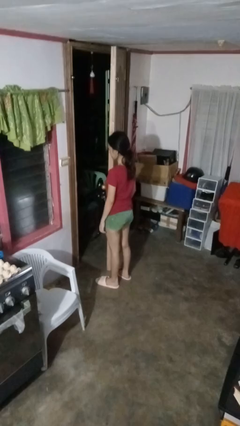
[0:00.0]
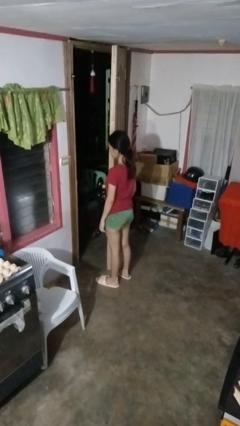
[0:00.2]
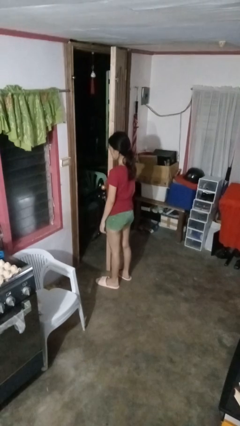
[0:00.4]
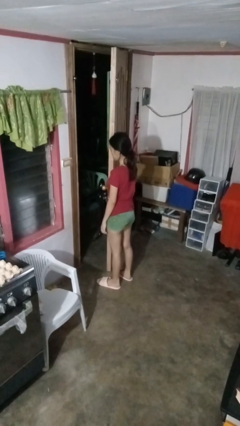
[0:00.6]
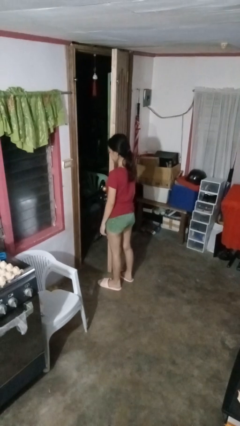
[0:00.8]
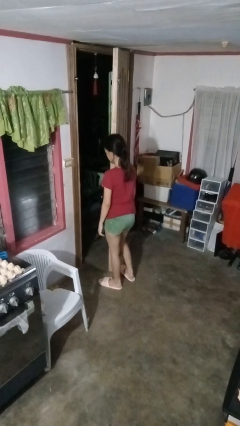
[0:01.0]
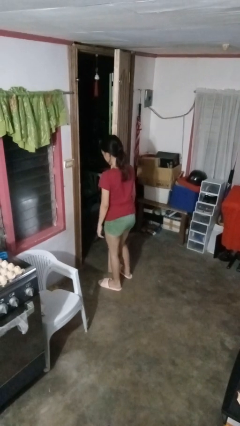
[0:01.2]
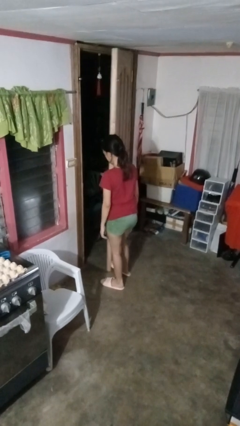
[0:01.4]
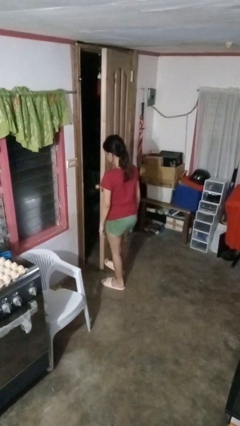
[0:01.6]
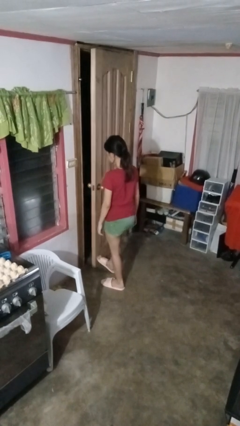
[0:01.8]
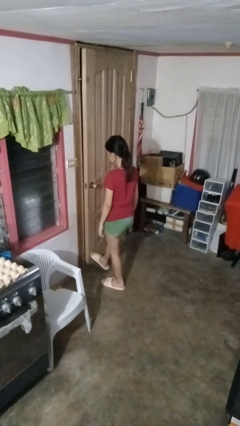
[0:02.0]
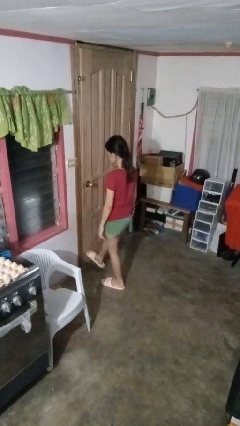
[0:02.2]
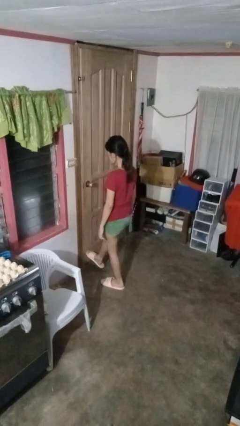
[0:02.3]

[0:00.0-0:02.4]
person closes door with foot

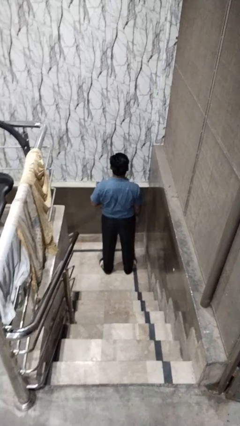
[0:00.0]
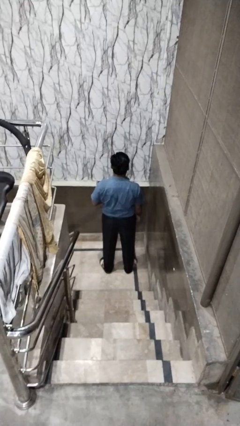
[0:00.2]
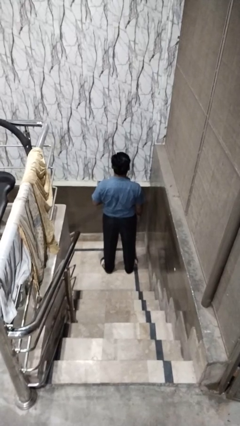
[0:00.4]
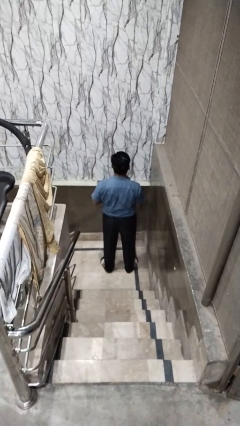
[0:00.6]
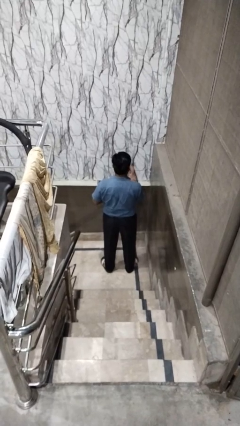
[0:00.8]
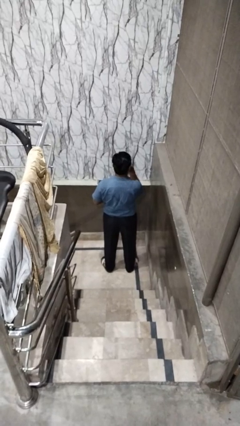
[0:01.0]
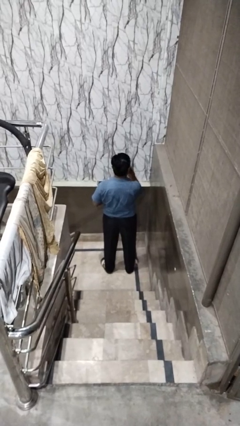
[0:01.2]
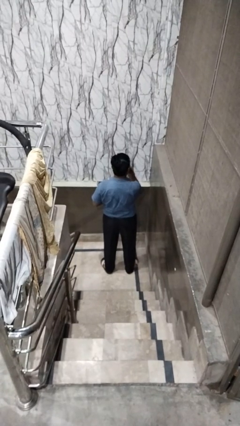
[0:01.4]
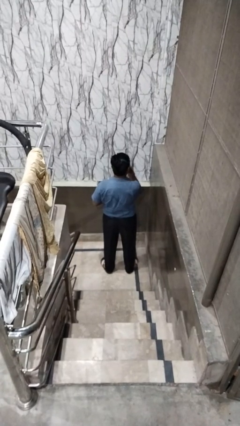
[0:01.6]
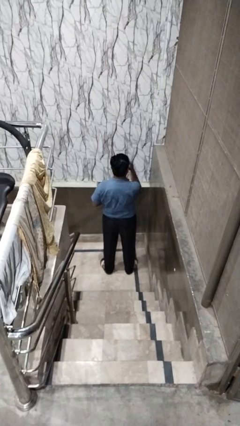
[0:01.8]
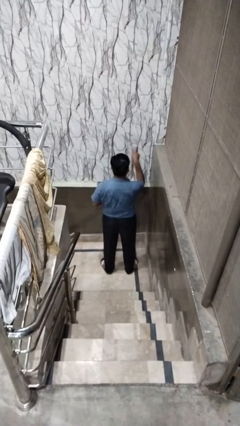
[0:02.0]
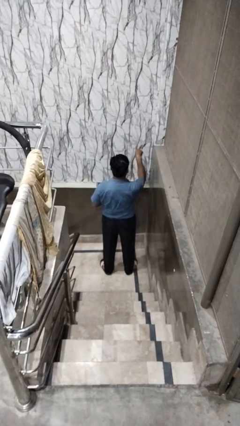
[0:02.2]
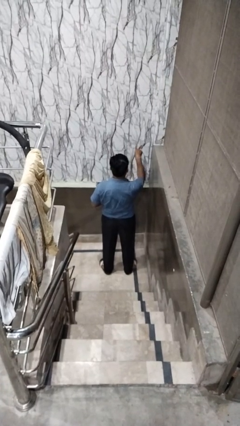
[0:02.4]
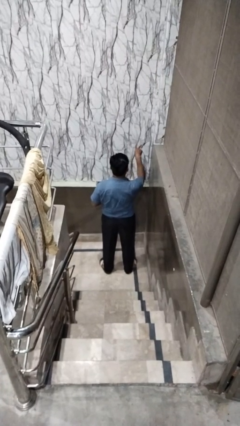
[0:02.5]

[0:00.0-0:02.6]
person gestures watch closely

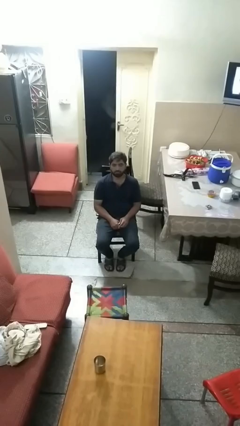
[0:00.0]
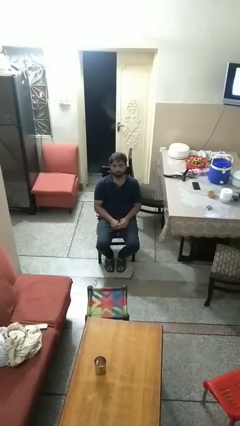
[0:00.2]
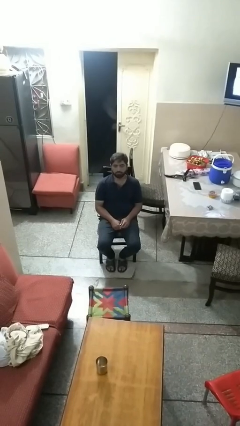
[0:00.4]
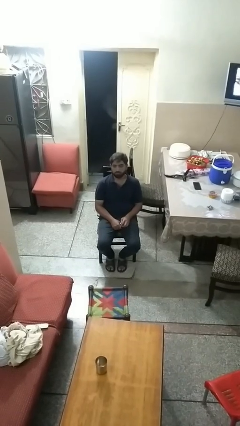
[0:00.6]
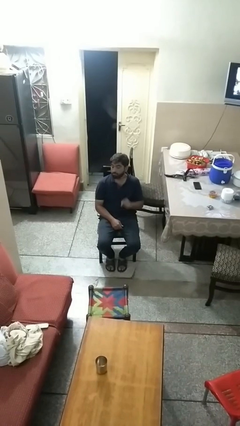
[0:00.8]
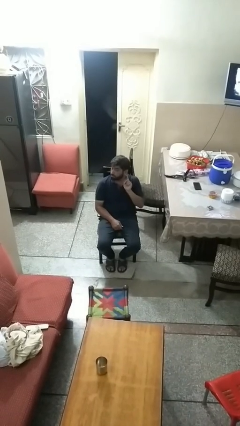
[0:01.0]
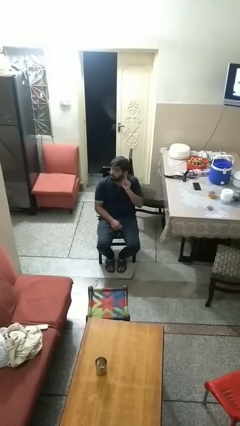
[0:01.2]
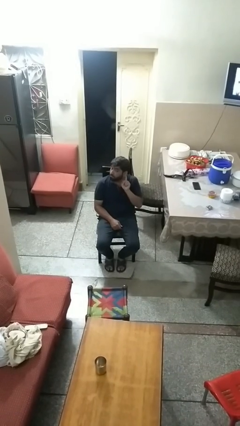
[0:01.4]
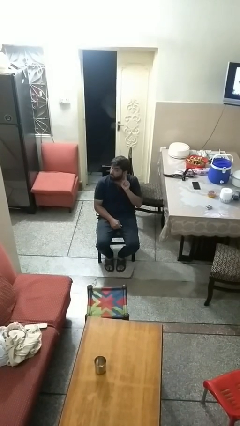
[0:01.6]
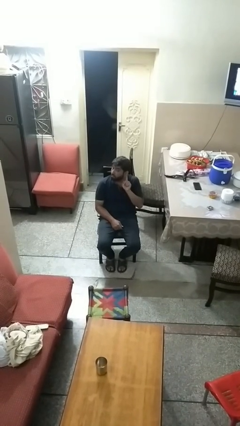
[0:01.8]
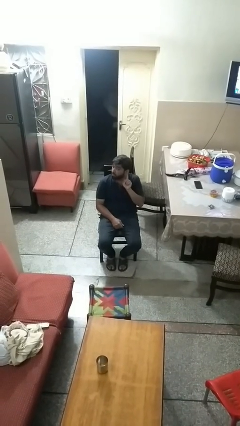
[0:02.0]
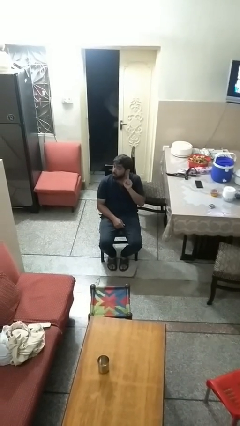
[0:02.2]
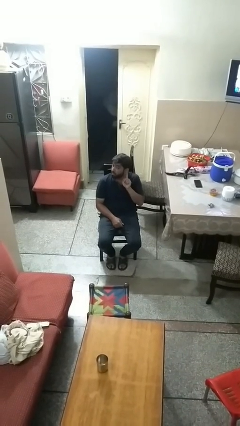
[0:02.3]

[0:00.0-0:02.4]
person gestures listen closely

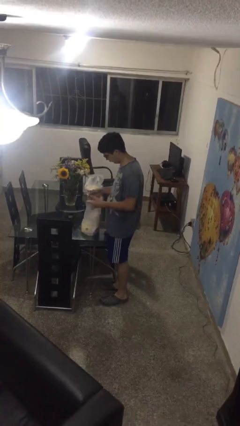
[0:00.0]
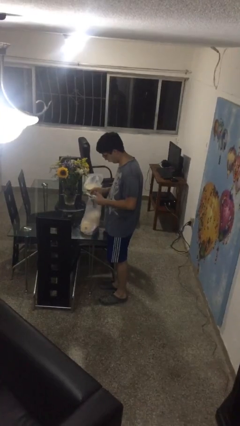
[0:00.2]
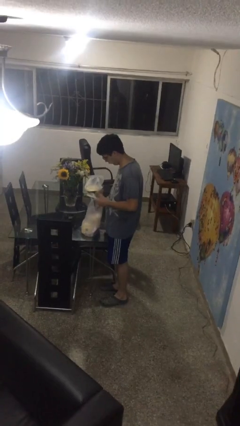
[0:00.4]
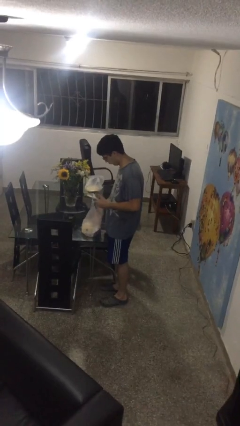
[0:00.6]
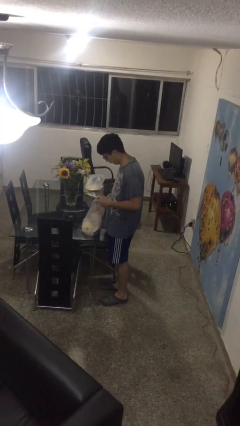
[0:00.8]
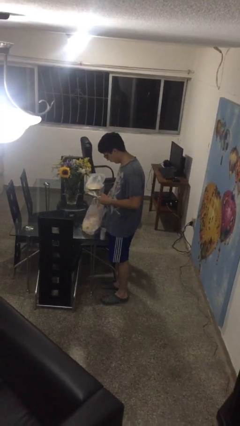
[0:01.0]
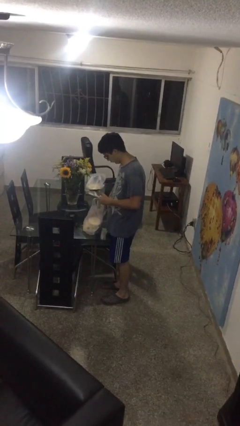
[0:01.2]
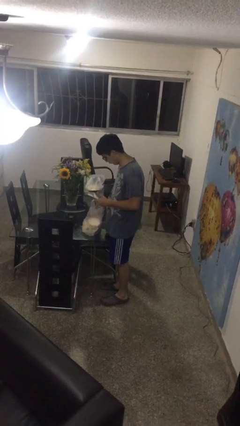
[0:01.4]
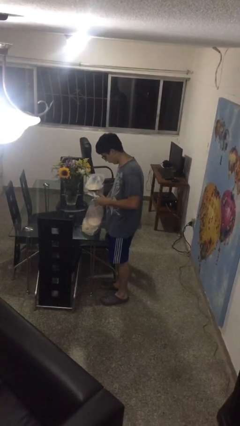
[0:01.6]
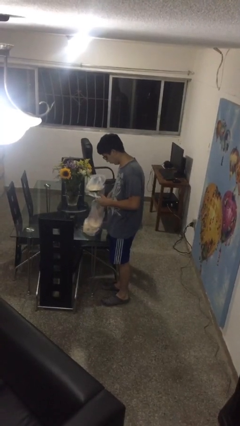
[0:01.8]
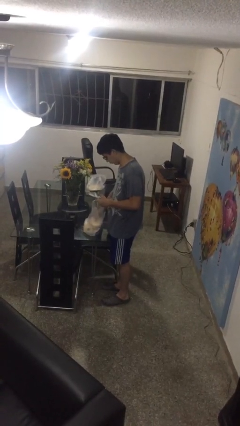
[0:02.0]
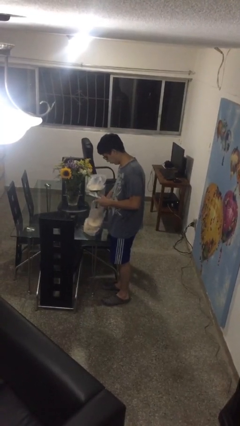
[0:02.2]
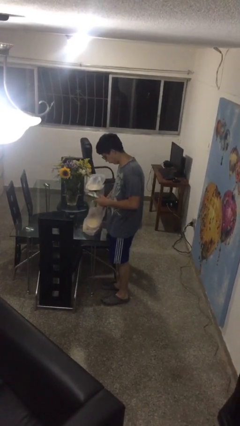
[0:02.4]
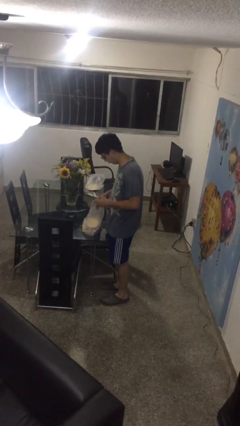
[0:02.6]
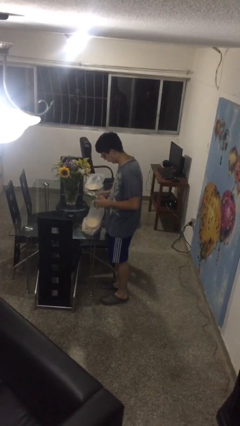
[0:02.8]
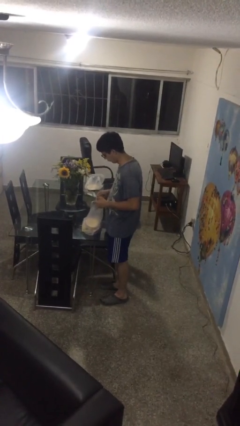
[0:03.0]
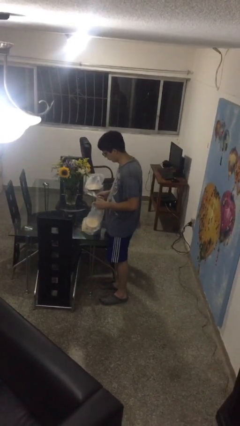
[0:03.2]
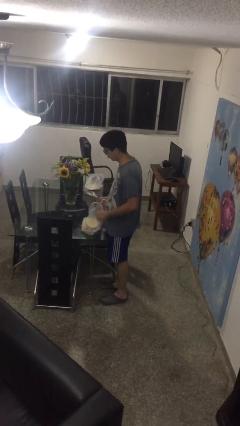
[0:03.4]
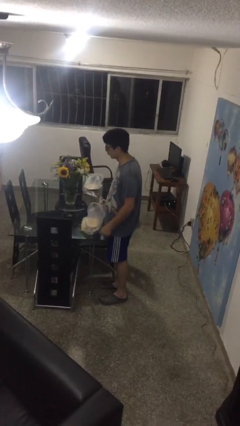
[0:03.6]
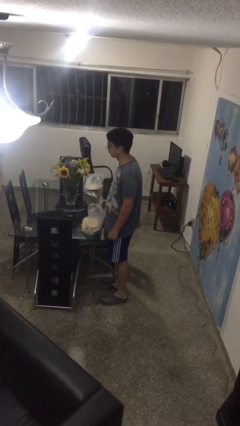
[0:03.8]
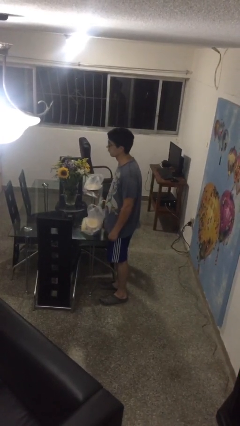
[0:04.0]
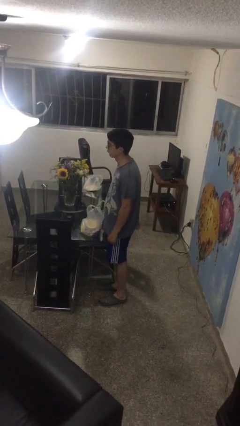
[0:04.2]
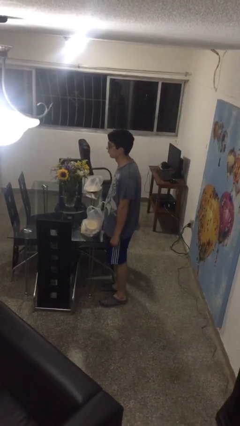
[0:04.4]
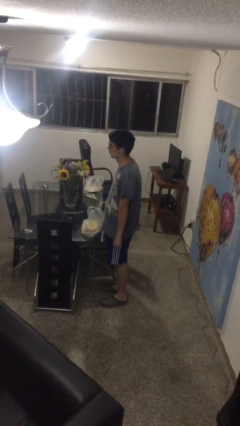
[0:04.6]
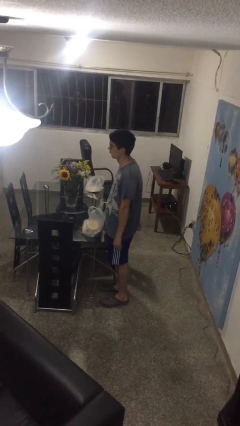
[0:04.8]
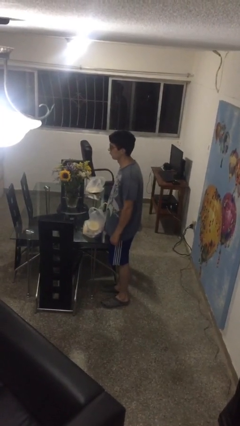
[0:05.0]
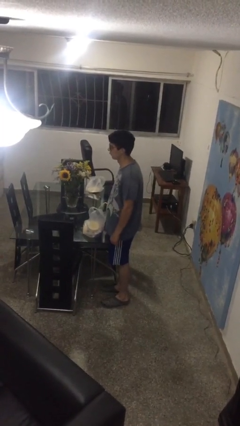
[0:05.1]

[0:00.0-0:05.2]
person searches in bag

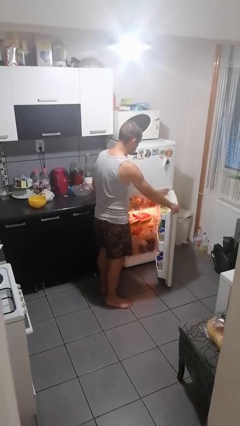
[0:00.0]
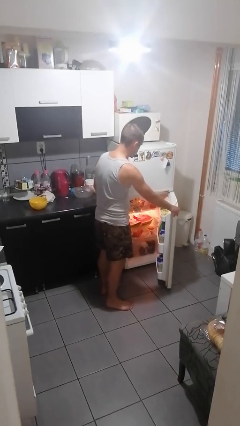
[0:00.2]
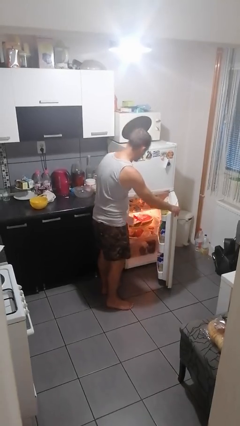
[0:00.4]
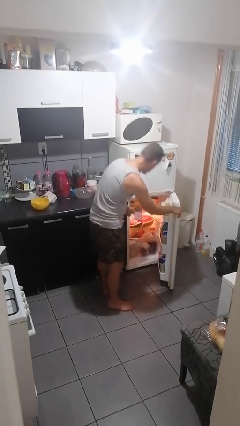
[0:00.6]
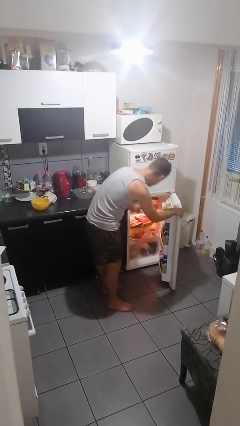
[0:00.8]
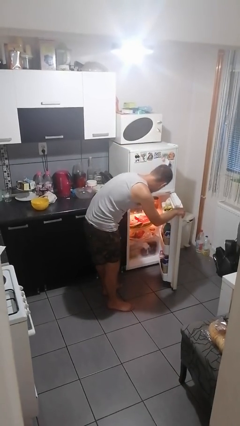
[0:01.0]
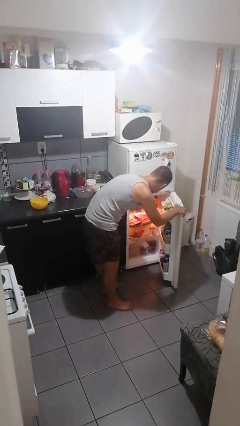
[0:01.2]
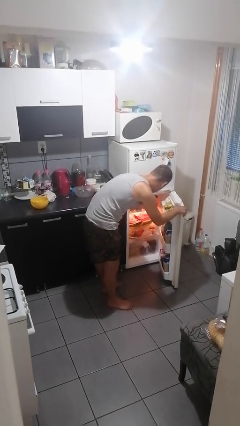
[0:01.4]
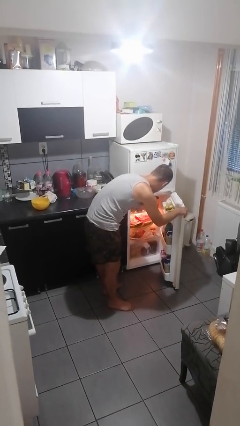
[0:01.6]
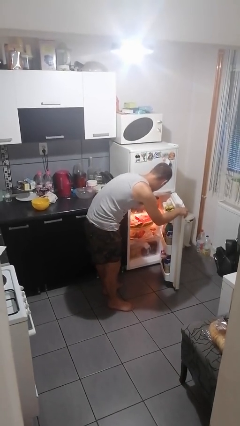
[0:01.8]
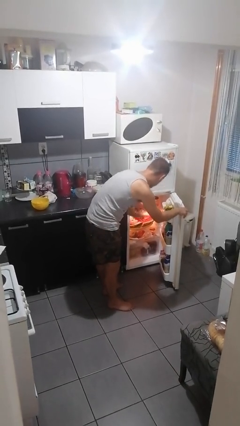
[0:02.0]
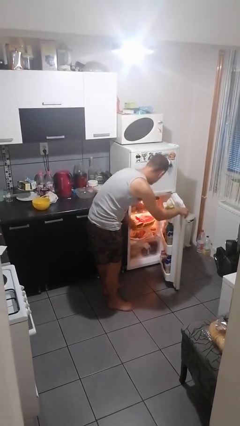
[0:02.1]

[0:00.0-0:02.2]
person puts object into refrigerator

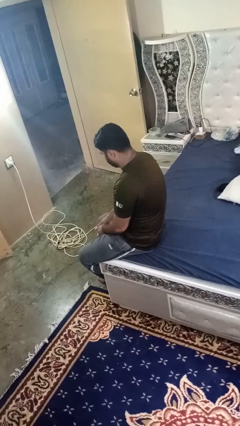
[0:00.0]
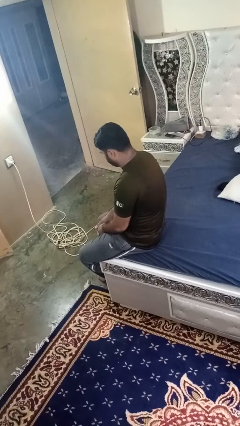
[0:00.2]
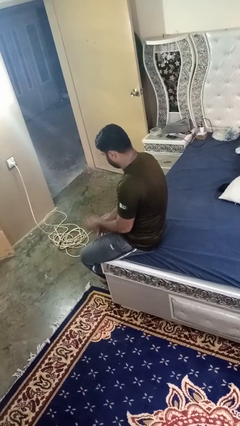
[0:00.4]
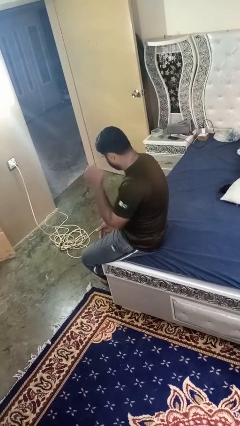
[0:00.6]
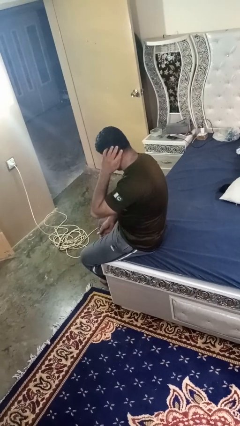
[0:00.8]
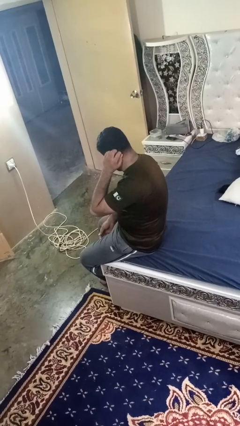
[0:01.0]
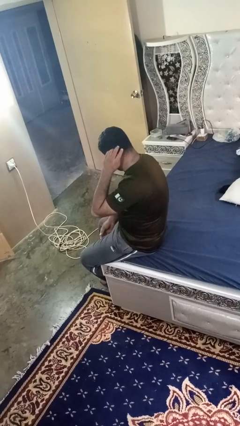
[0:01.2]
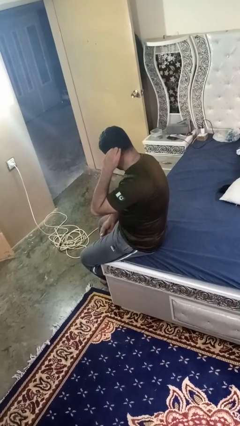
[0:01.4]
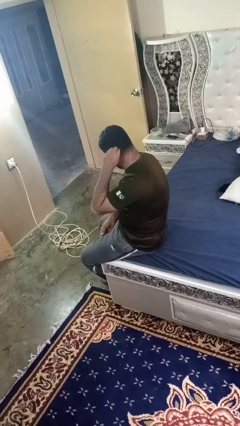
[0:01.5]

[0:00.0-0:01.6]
person strokes hair

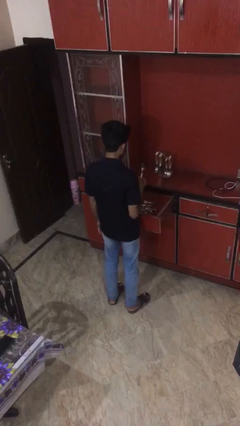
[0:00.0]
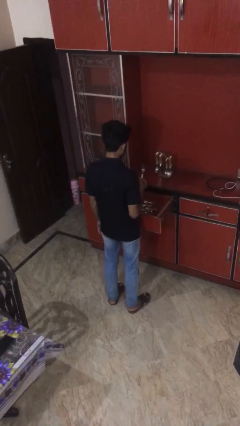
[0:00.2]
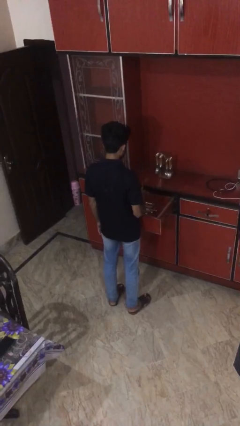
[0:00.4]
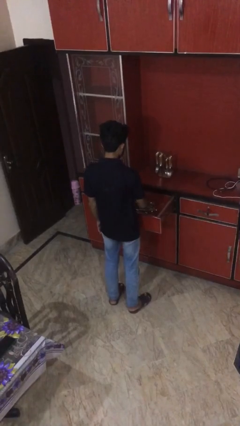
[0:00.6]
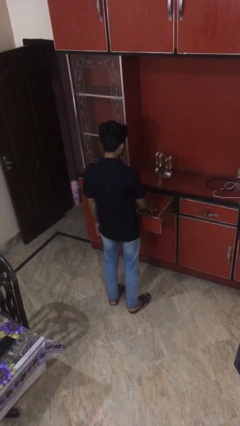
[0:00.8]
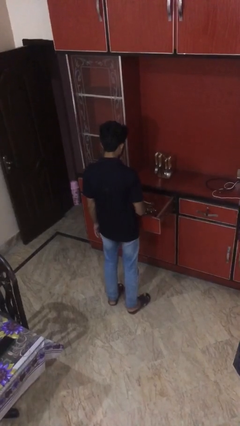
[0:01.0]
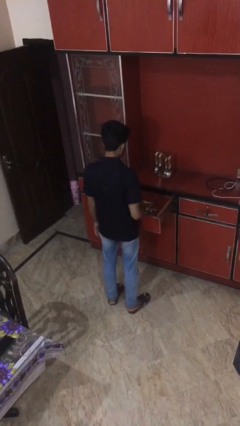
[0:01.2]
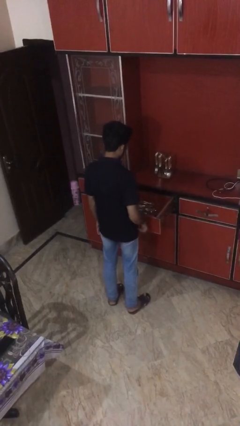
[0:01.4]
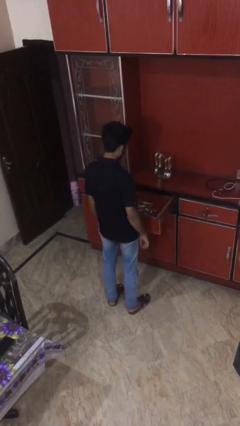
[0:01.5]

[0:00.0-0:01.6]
person puts object into kitchen drawer
